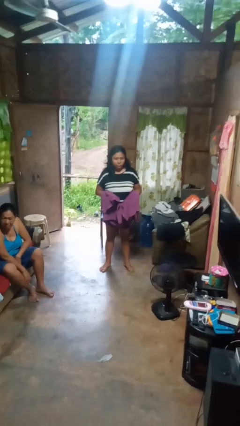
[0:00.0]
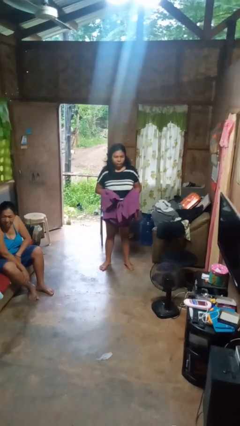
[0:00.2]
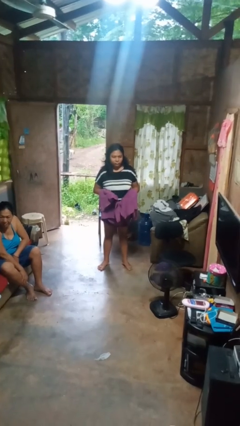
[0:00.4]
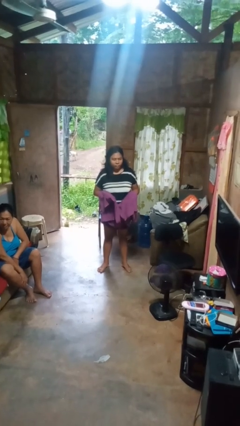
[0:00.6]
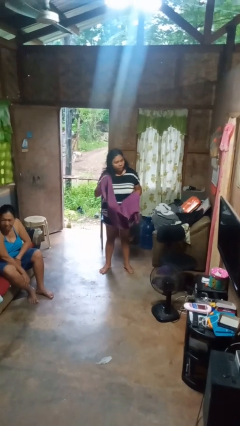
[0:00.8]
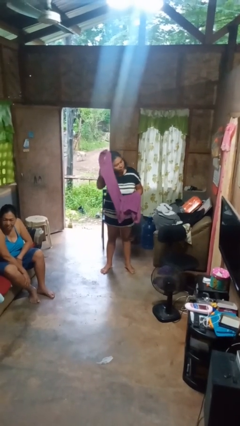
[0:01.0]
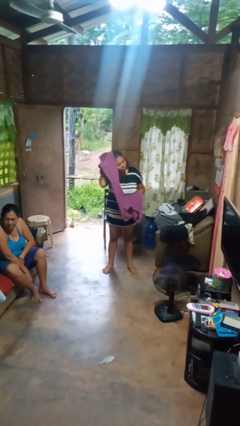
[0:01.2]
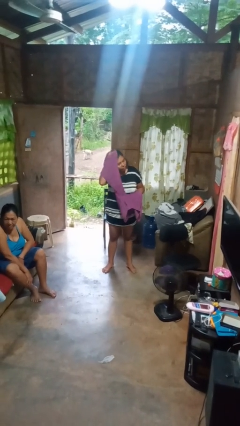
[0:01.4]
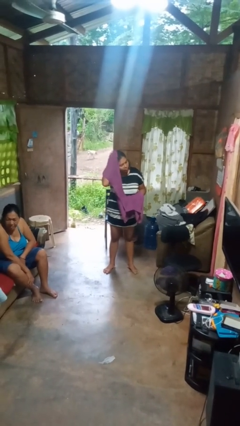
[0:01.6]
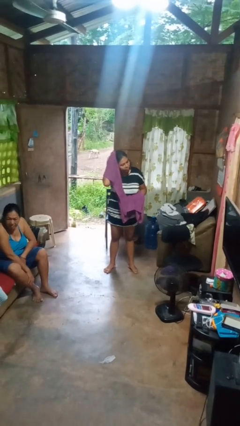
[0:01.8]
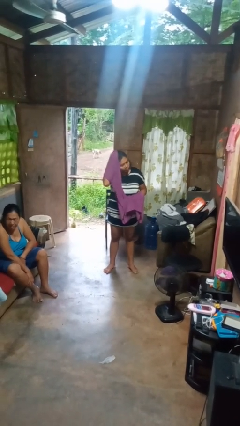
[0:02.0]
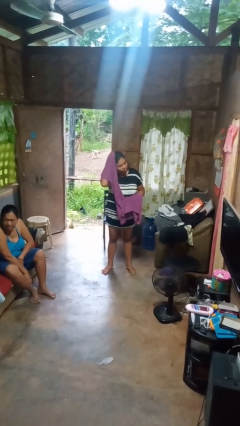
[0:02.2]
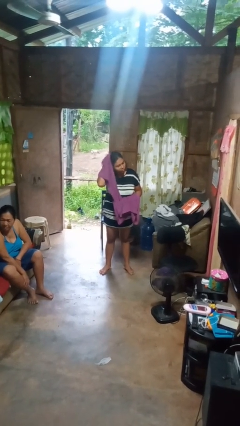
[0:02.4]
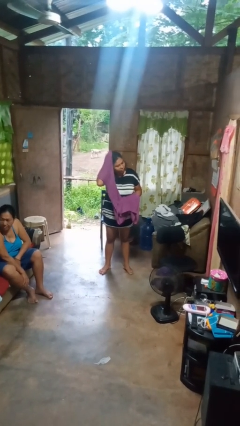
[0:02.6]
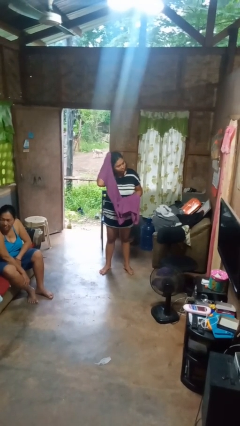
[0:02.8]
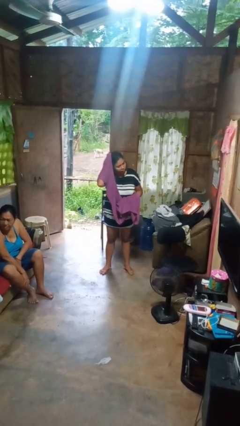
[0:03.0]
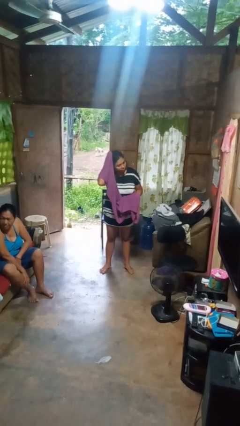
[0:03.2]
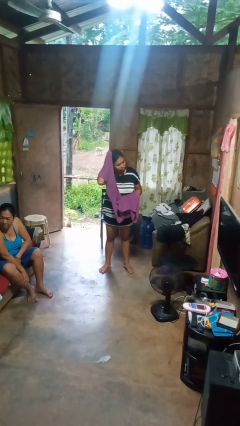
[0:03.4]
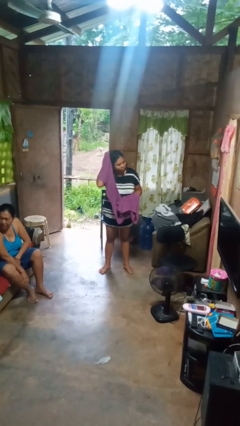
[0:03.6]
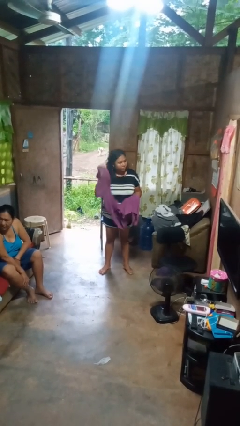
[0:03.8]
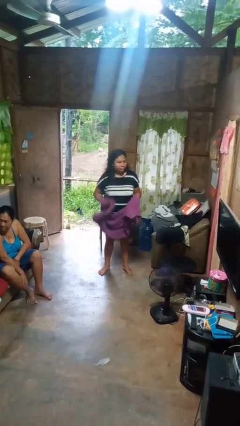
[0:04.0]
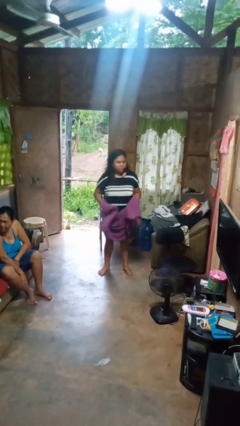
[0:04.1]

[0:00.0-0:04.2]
person dries hair with towel

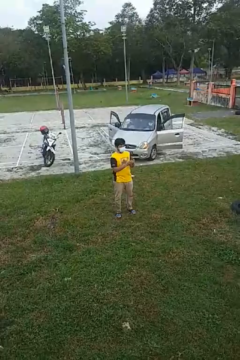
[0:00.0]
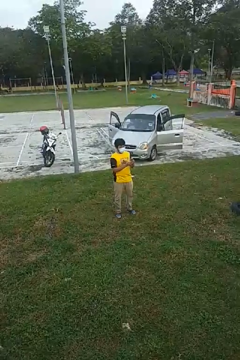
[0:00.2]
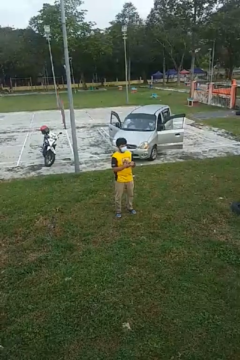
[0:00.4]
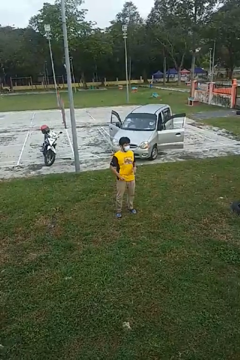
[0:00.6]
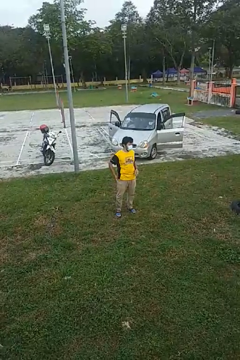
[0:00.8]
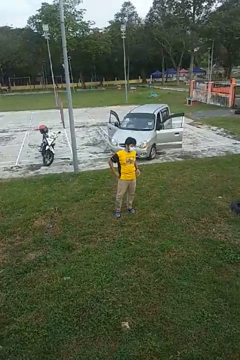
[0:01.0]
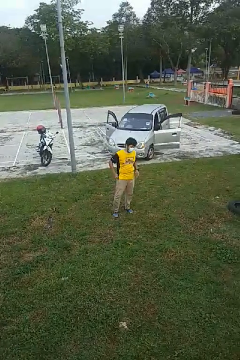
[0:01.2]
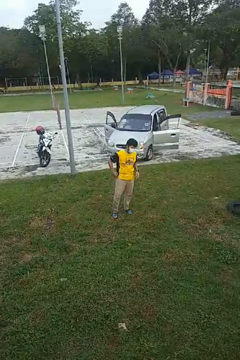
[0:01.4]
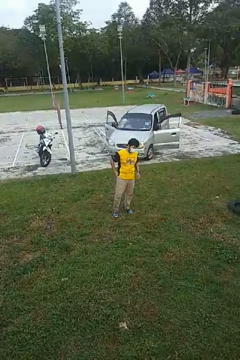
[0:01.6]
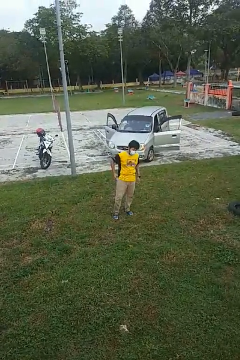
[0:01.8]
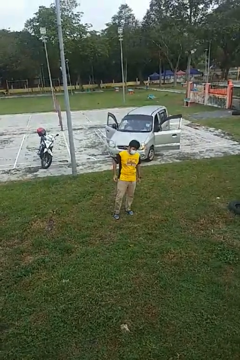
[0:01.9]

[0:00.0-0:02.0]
person puts phone into pocket

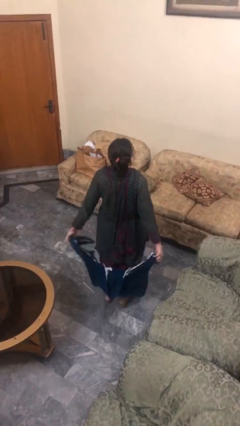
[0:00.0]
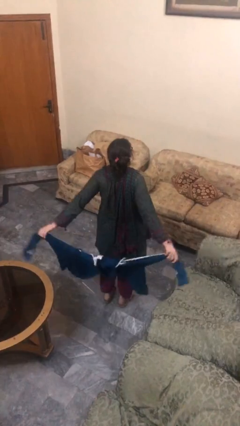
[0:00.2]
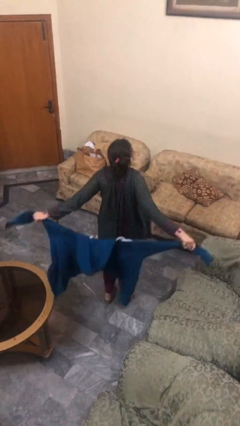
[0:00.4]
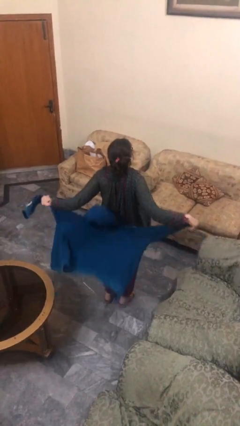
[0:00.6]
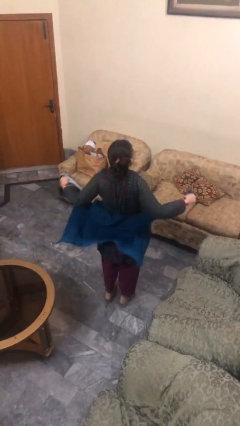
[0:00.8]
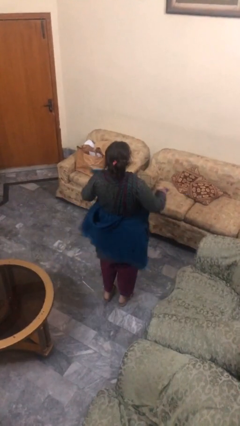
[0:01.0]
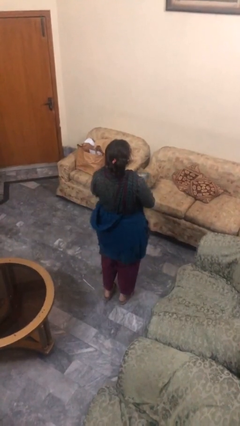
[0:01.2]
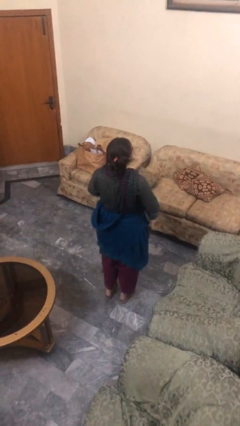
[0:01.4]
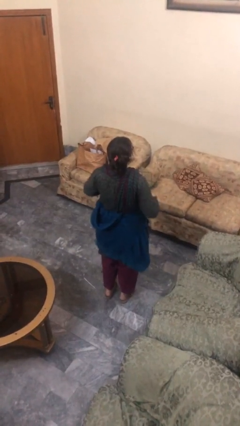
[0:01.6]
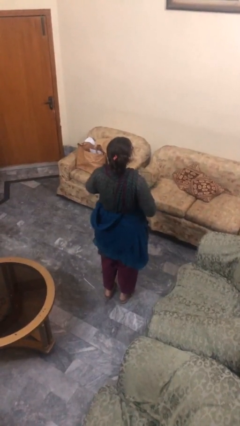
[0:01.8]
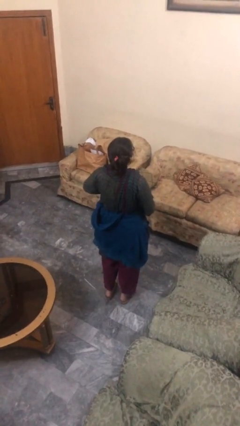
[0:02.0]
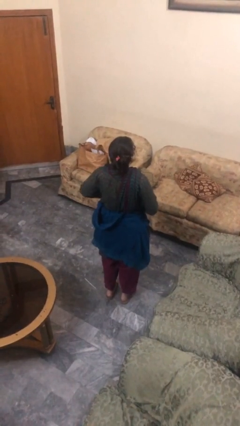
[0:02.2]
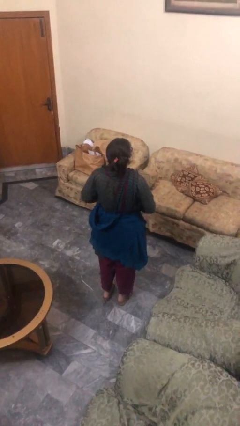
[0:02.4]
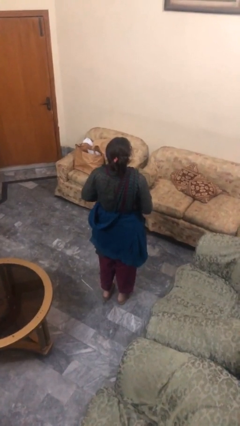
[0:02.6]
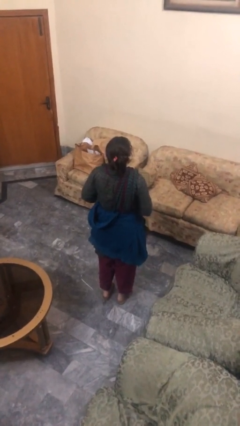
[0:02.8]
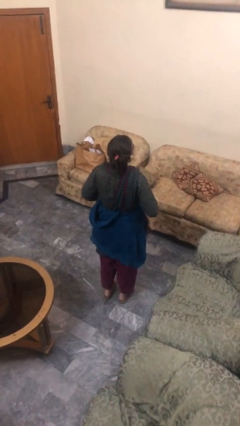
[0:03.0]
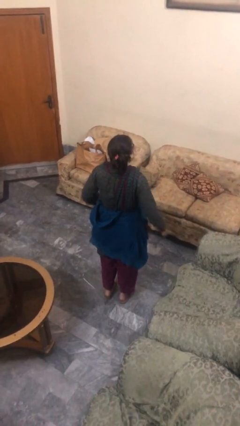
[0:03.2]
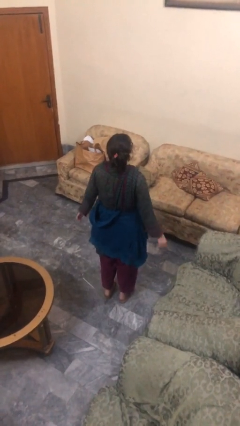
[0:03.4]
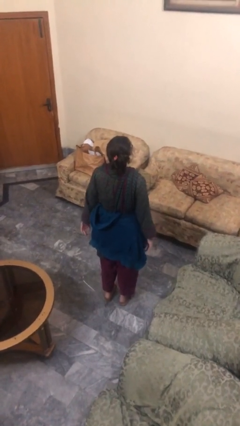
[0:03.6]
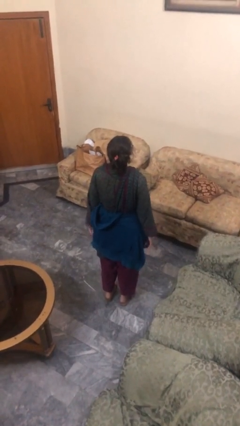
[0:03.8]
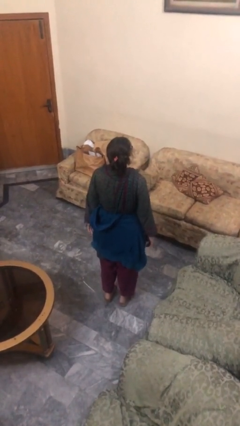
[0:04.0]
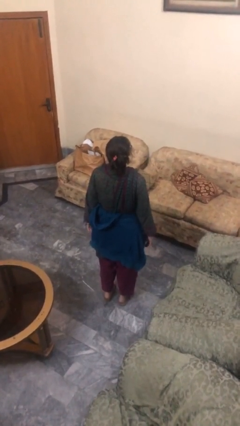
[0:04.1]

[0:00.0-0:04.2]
person ties jacket around waist

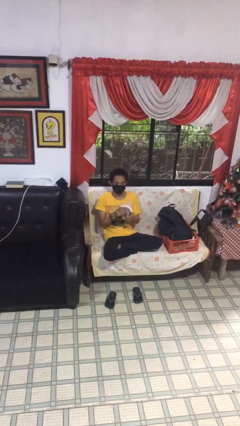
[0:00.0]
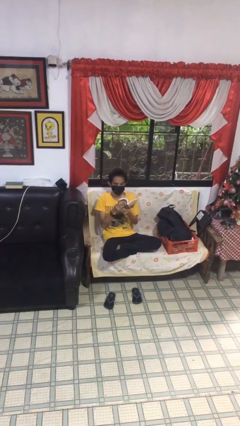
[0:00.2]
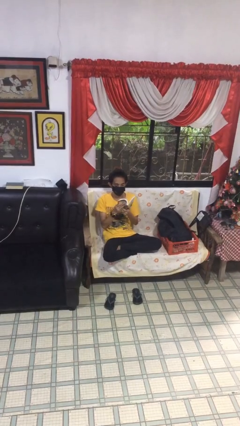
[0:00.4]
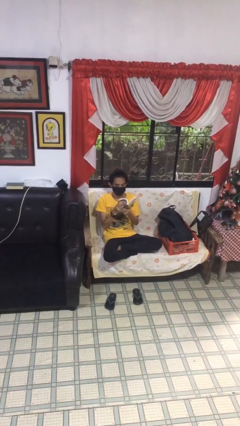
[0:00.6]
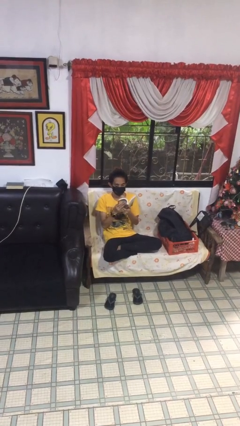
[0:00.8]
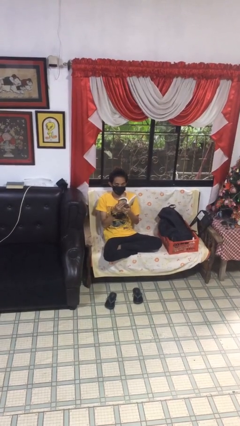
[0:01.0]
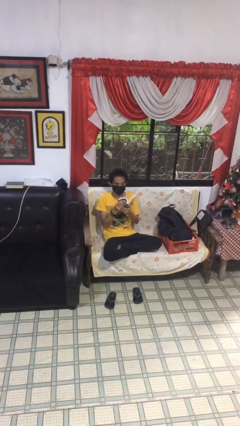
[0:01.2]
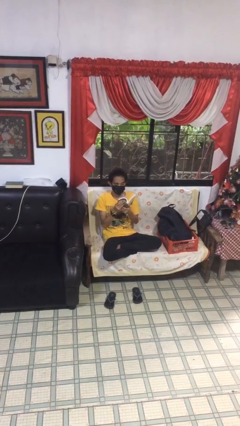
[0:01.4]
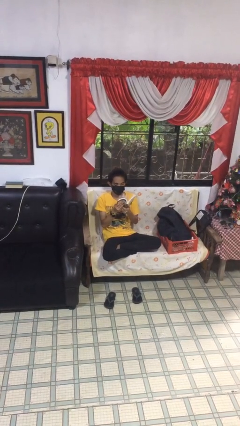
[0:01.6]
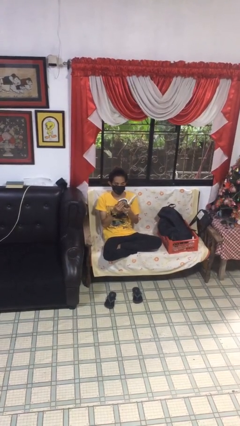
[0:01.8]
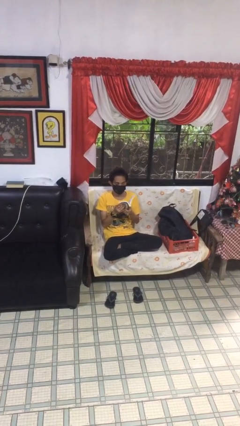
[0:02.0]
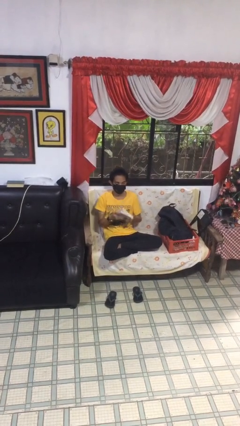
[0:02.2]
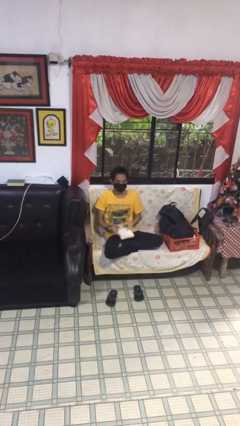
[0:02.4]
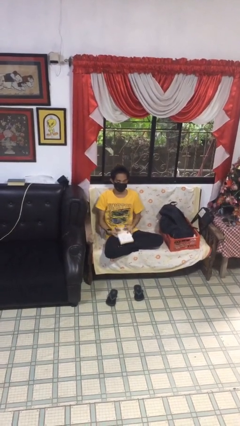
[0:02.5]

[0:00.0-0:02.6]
person interacts with laptop

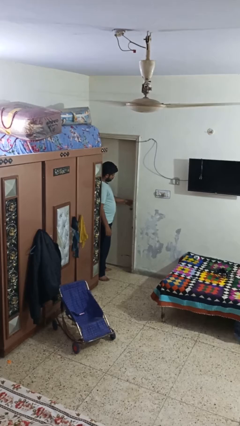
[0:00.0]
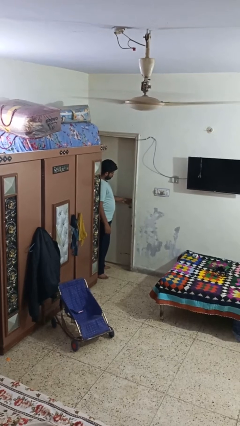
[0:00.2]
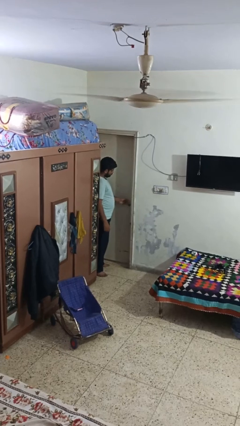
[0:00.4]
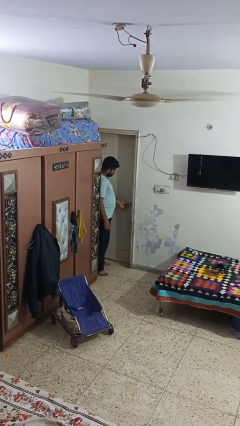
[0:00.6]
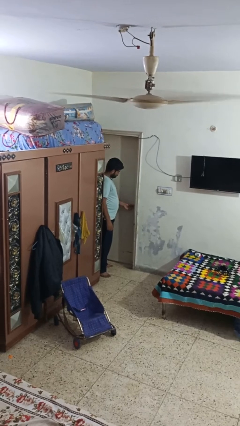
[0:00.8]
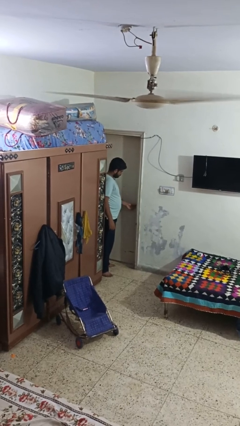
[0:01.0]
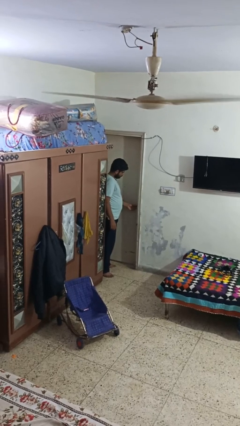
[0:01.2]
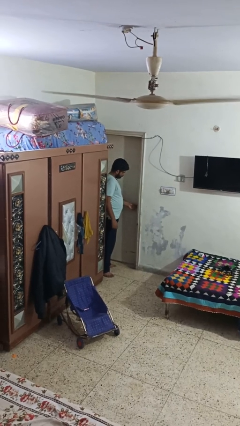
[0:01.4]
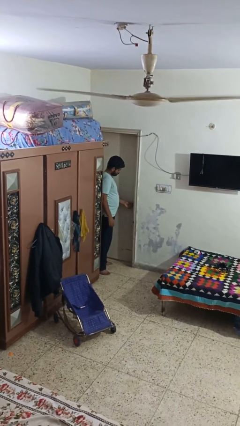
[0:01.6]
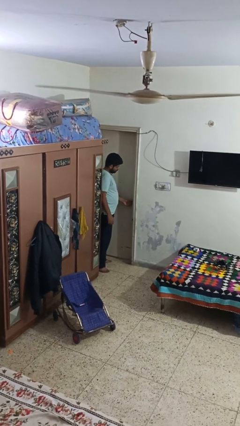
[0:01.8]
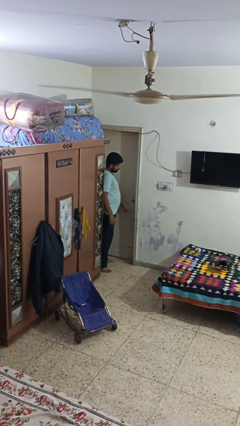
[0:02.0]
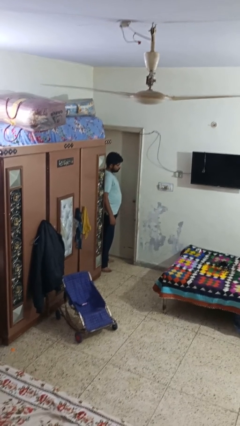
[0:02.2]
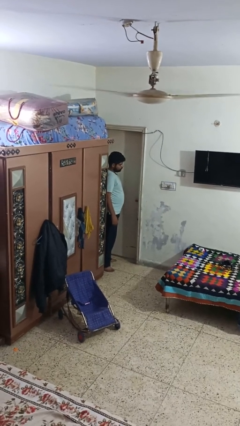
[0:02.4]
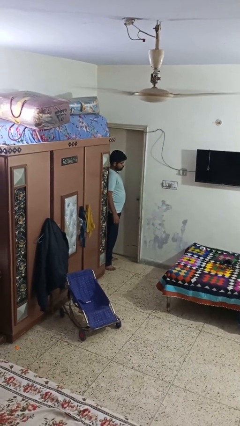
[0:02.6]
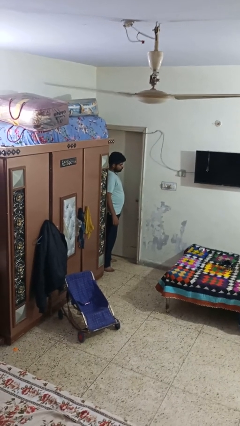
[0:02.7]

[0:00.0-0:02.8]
person locks door with keys

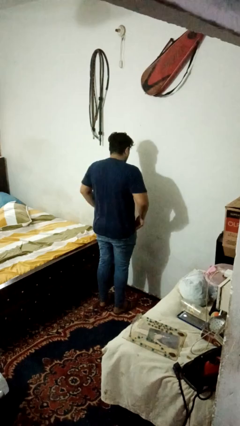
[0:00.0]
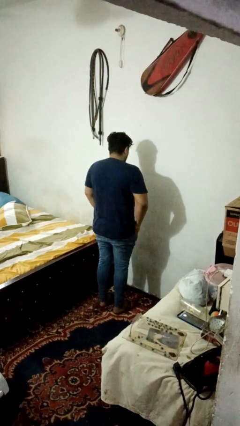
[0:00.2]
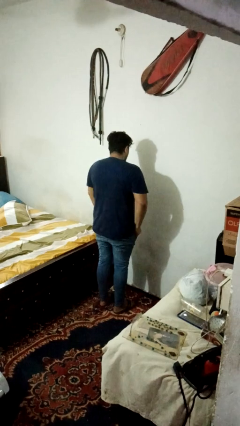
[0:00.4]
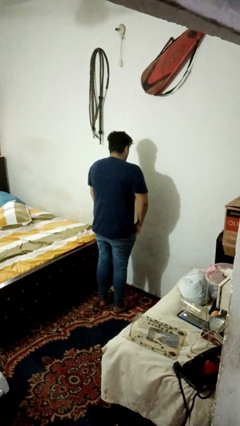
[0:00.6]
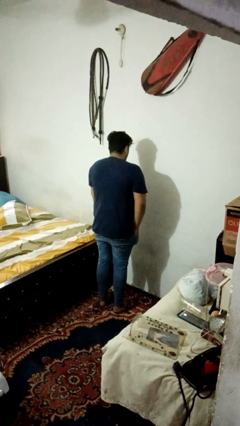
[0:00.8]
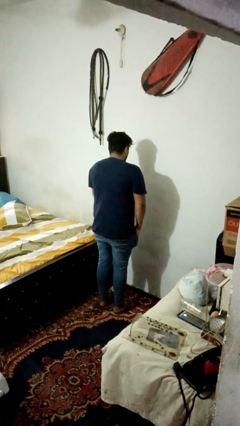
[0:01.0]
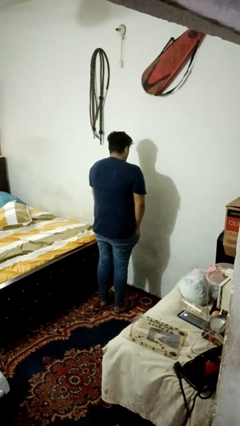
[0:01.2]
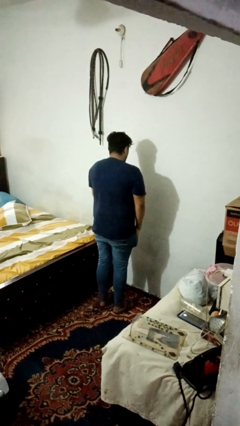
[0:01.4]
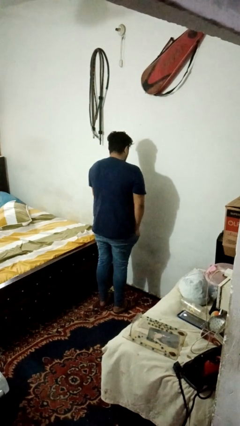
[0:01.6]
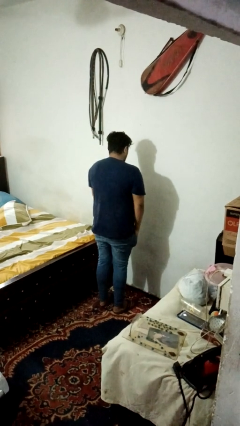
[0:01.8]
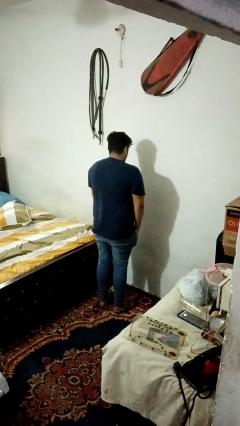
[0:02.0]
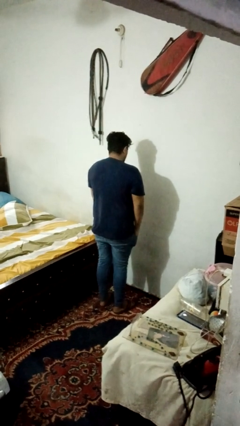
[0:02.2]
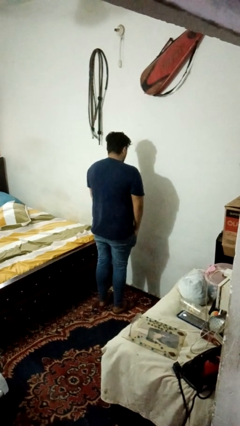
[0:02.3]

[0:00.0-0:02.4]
person puts hands in back pockets
